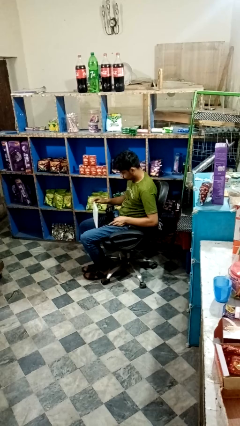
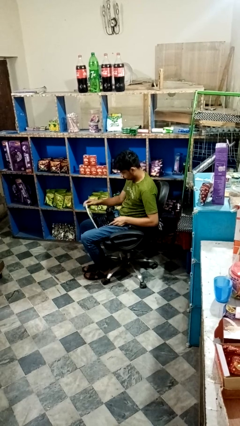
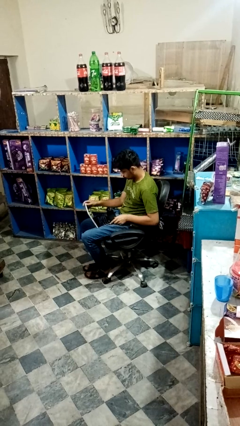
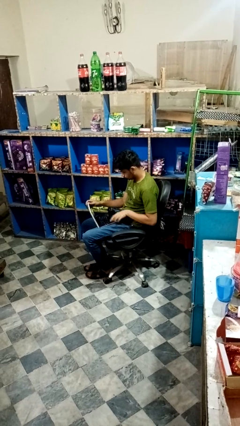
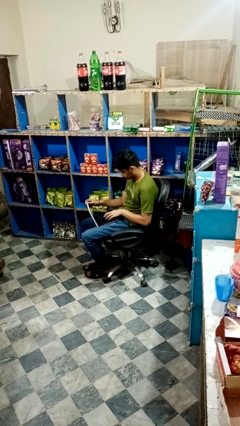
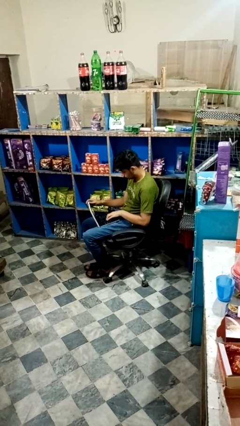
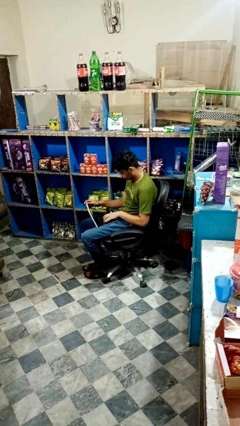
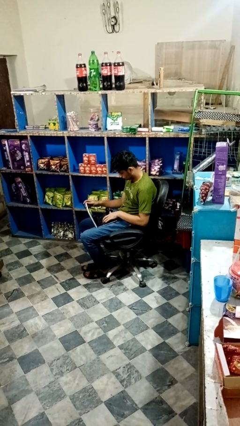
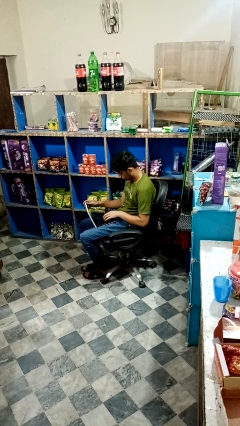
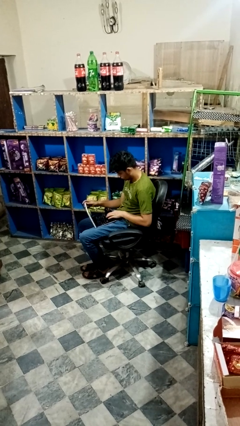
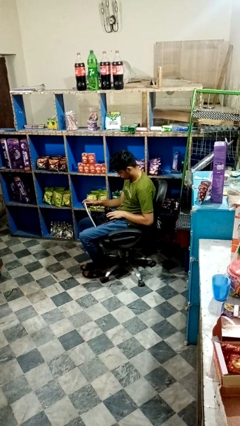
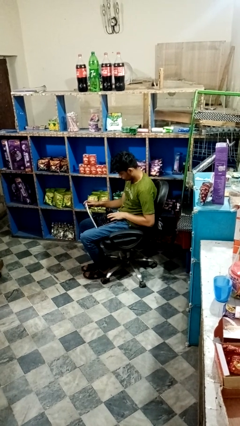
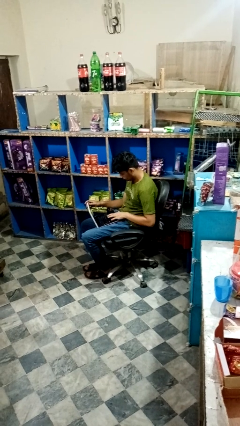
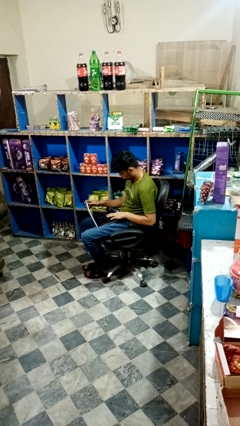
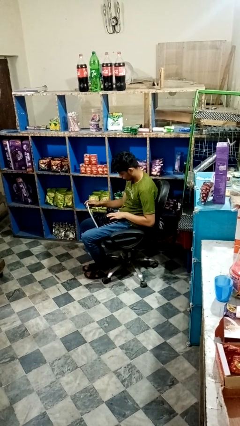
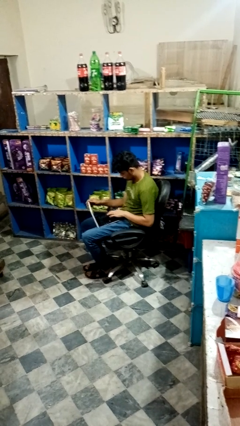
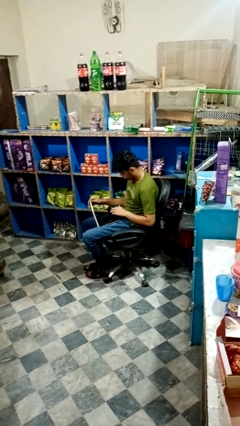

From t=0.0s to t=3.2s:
person opens laptop

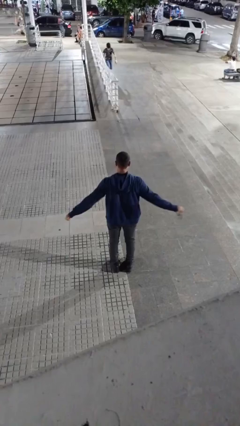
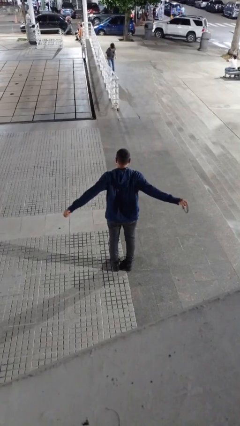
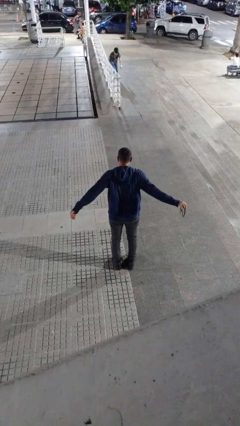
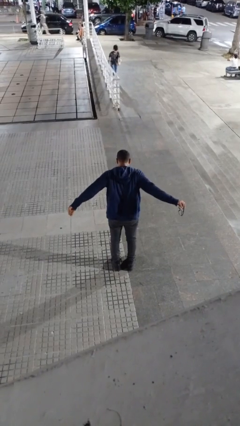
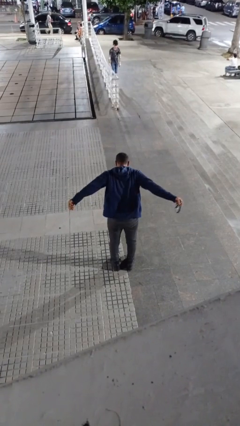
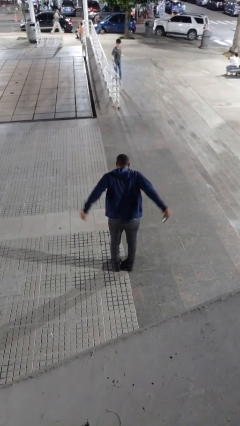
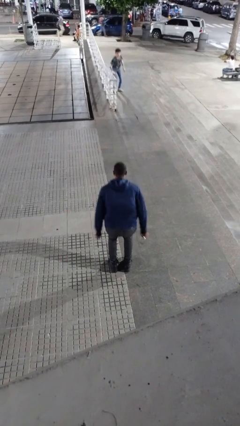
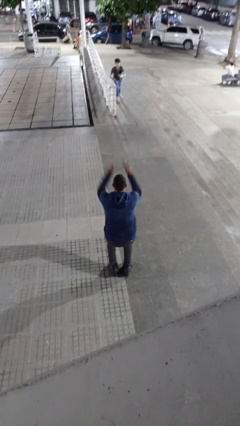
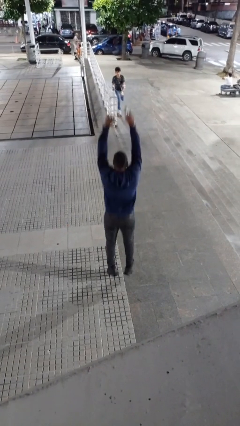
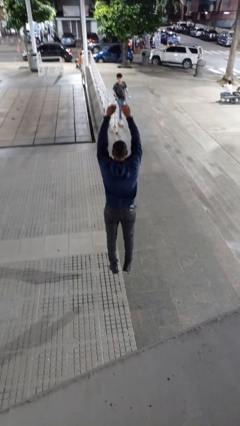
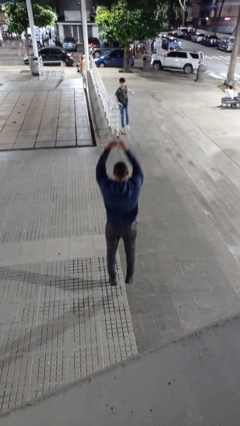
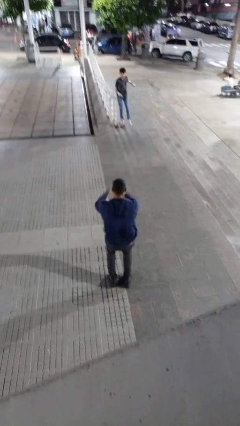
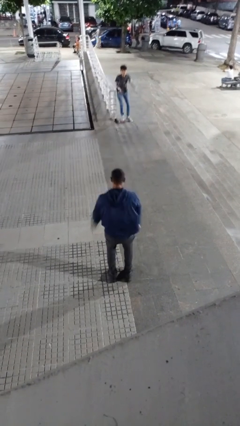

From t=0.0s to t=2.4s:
person jumps

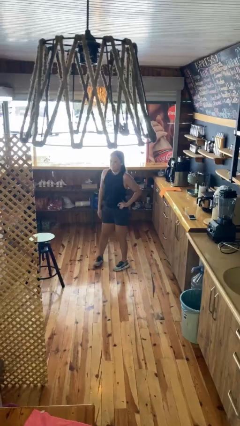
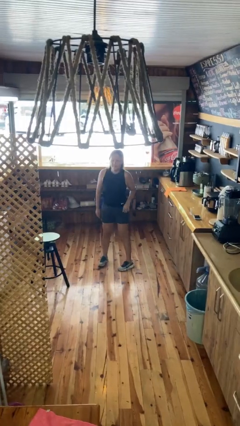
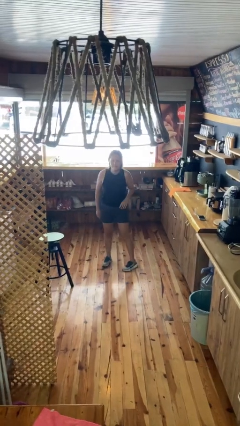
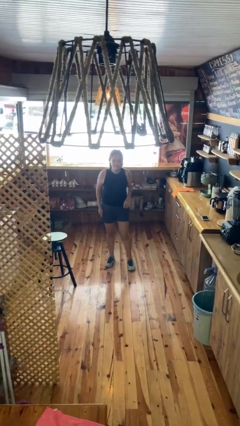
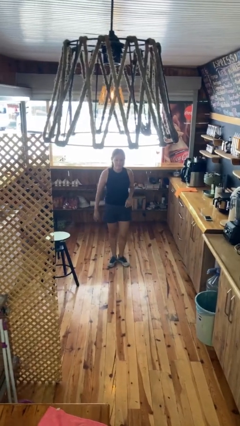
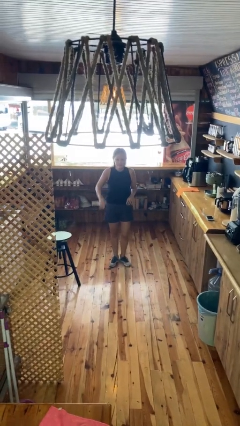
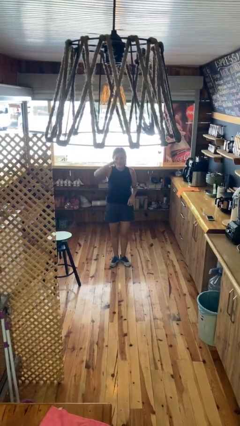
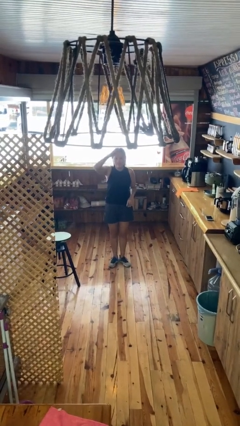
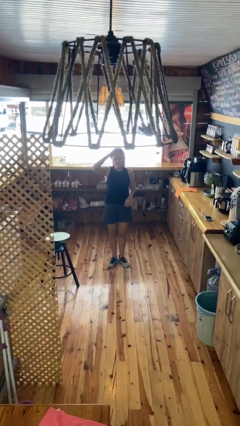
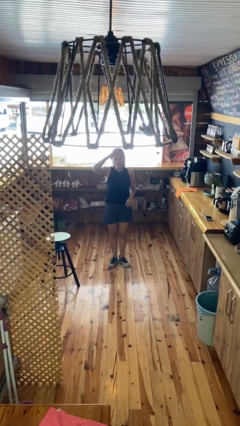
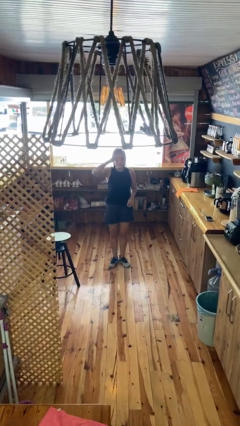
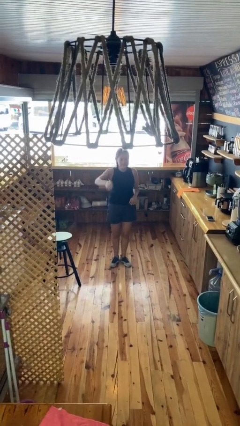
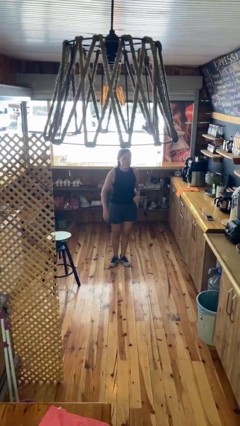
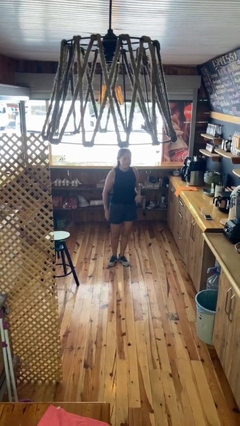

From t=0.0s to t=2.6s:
person salutes

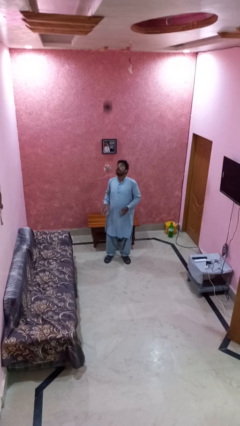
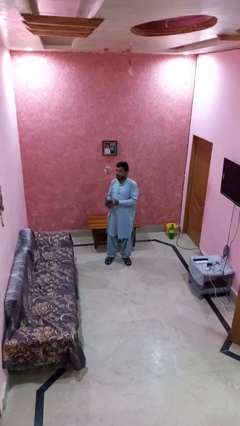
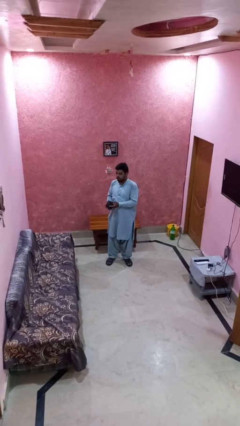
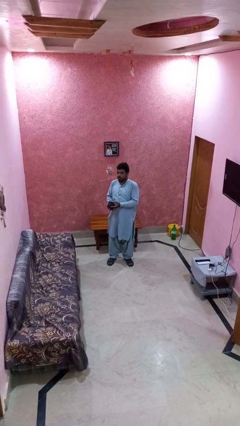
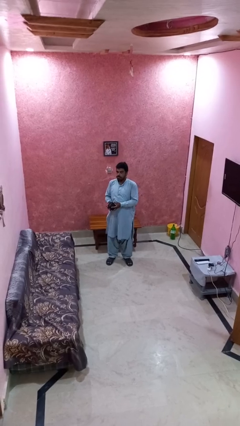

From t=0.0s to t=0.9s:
person catches dropped object

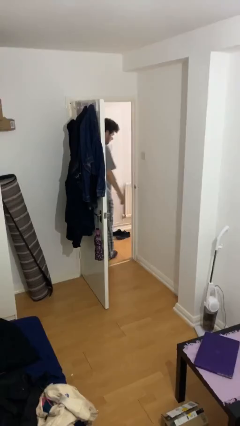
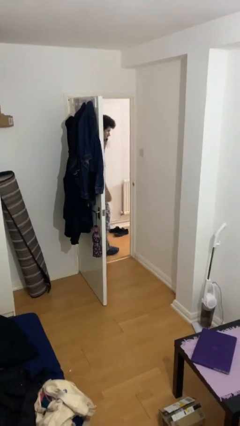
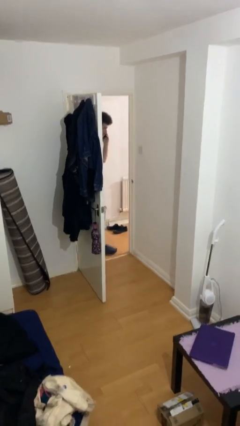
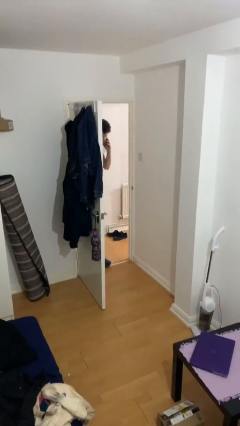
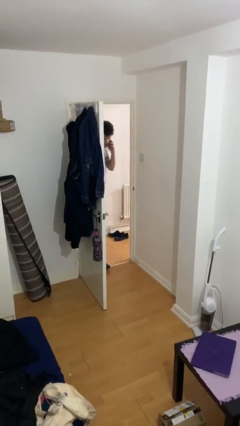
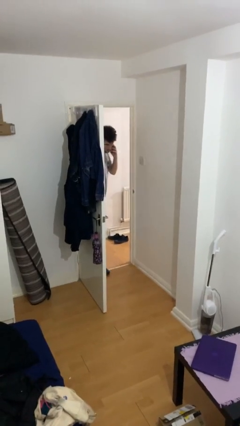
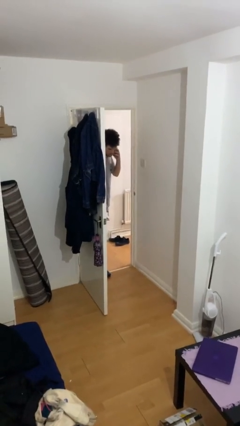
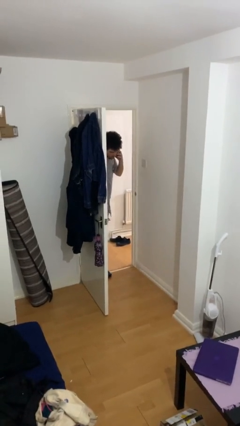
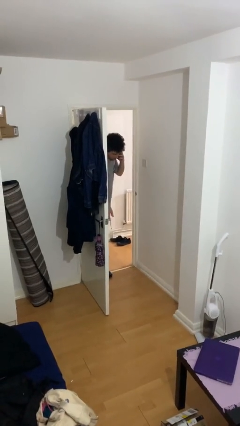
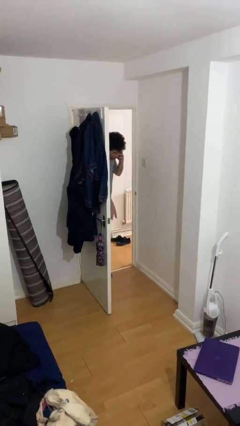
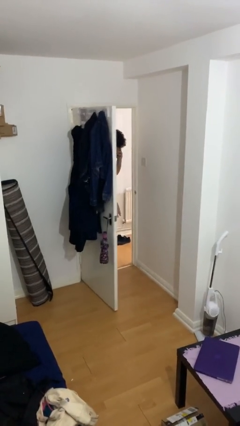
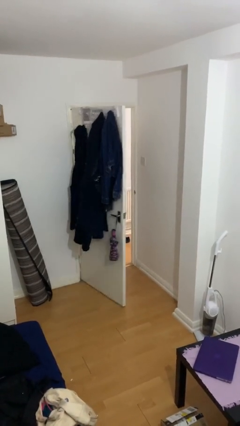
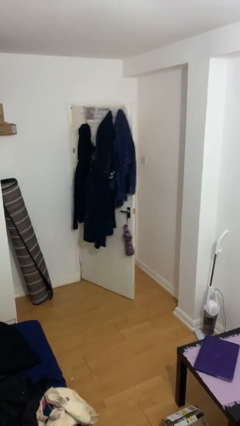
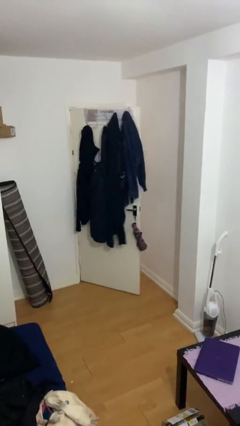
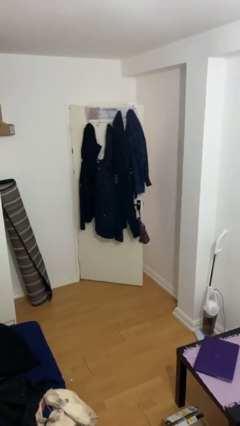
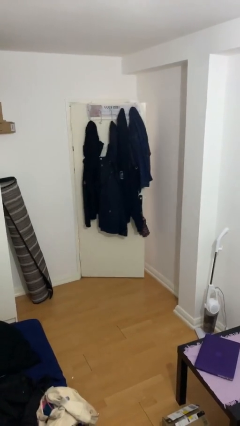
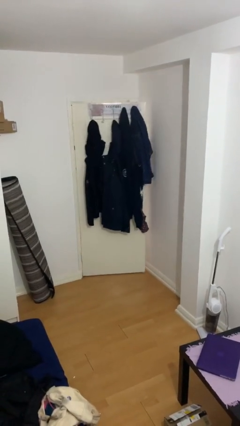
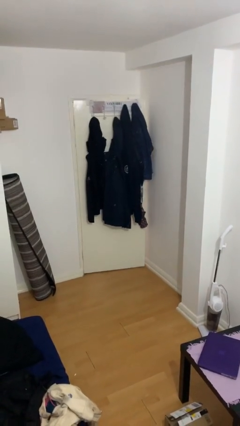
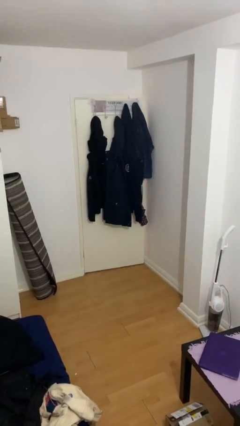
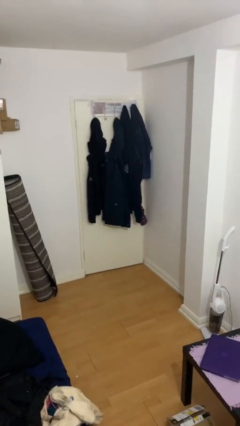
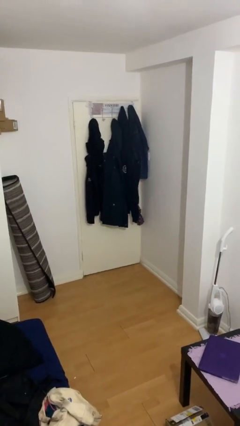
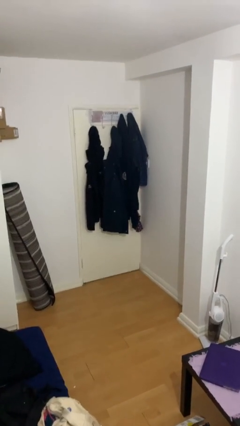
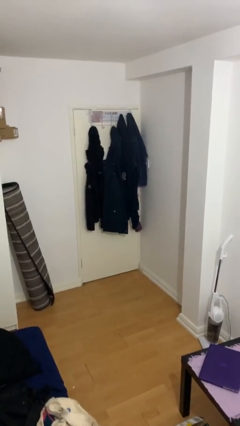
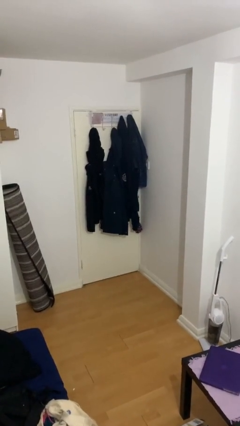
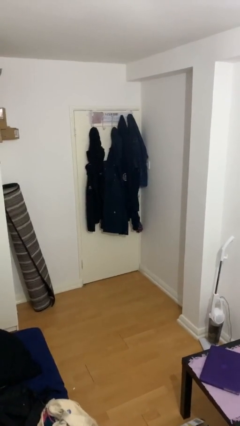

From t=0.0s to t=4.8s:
person closes facility door

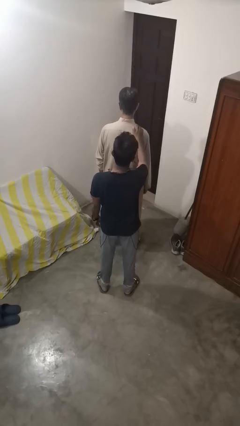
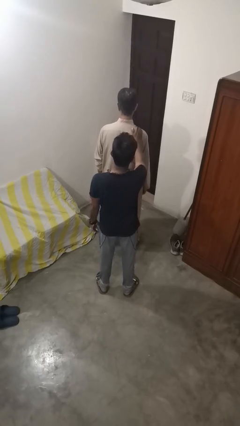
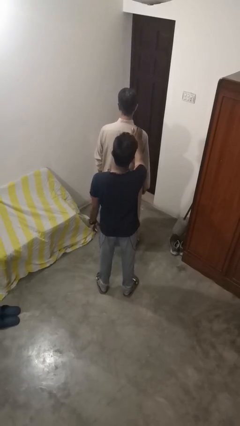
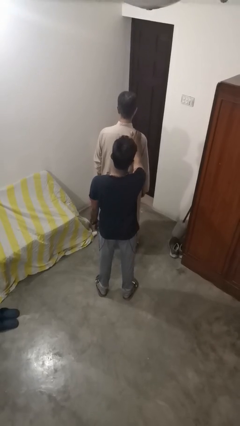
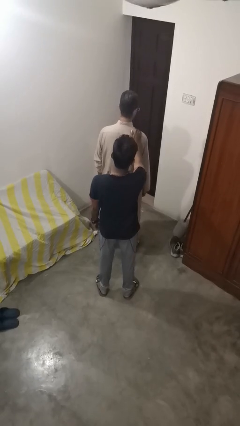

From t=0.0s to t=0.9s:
person grabs person by shoulder

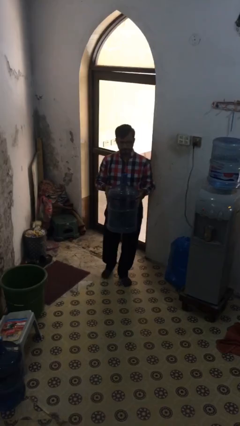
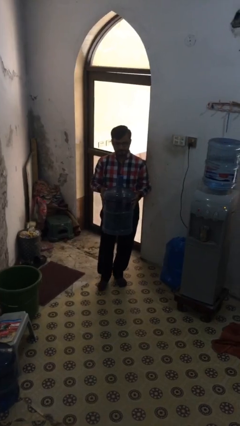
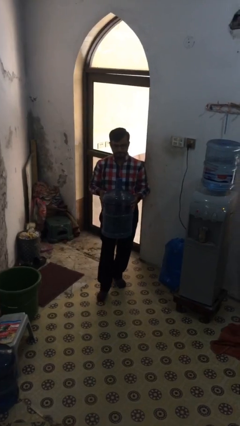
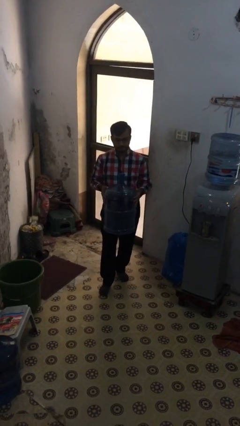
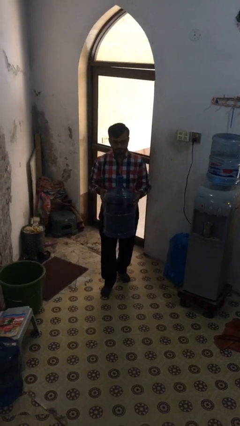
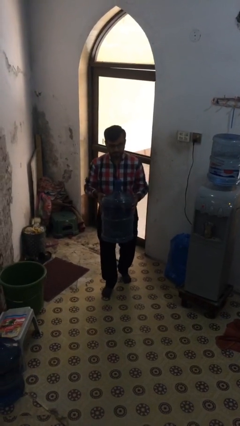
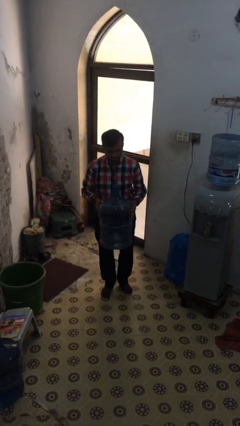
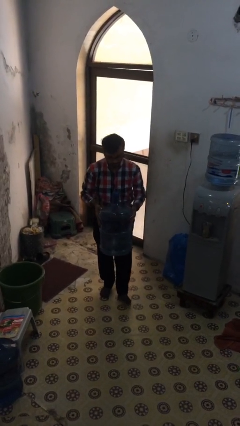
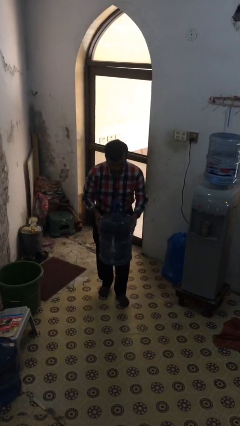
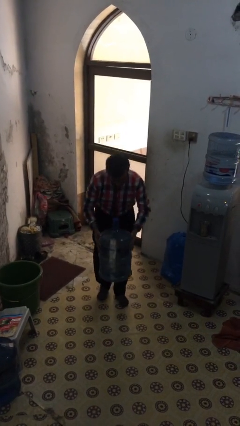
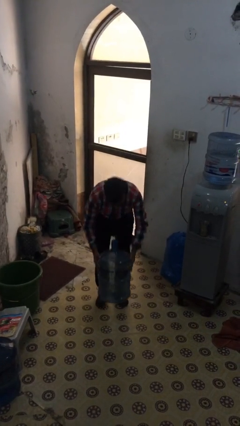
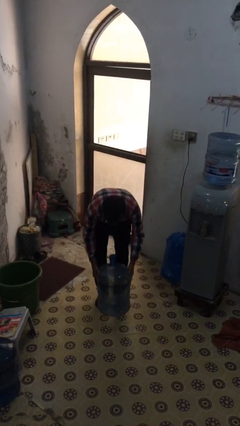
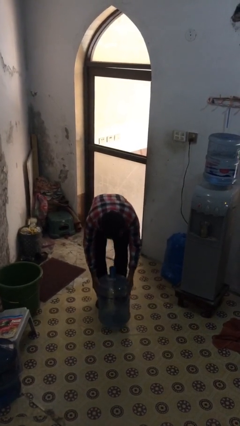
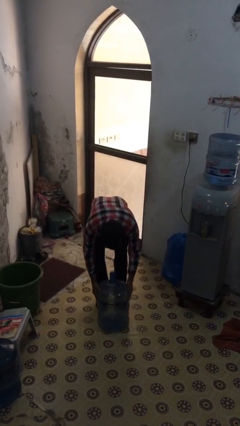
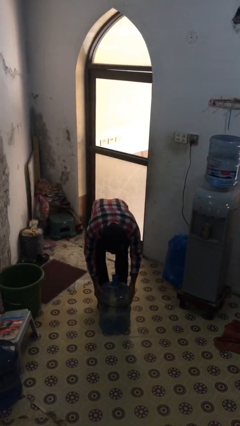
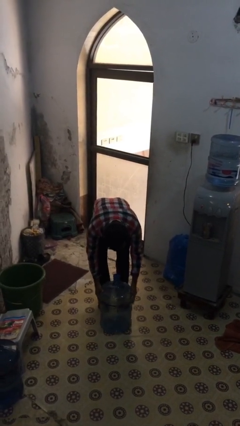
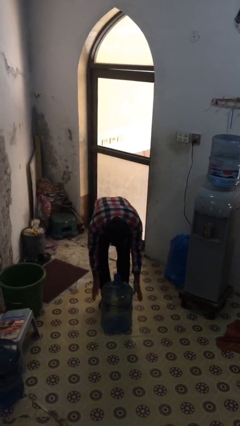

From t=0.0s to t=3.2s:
person puts down object on floor
